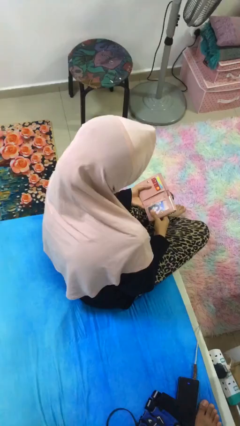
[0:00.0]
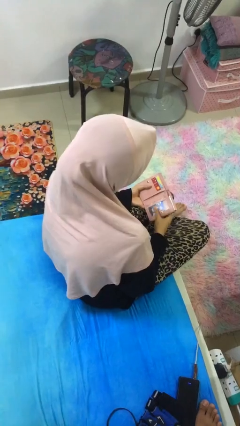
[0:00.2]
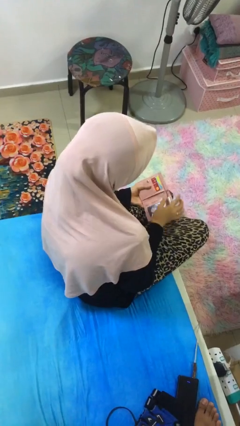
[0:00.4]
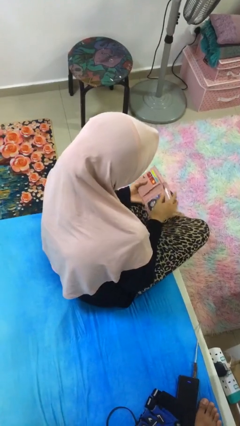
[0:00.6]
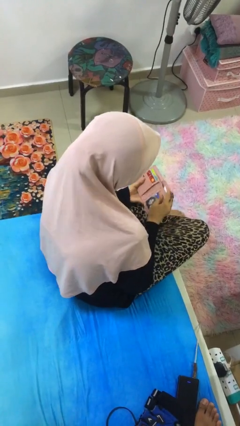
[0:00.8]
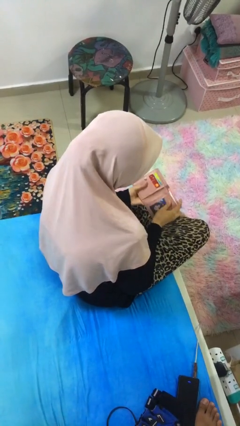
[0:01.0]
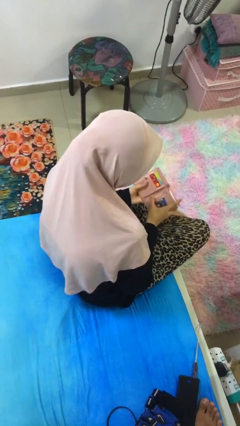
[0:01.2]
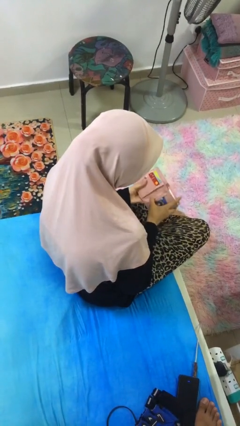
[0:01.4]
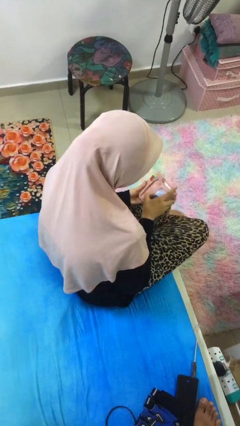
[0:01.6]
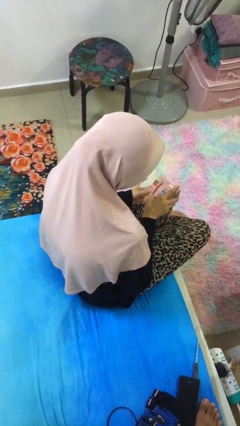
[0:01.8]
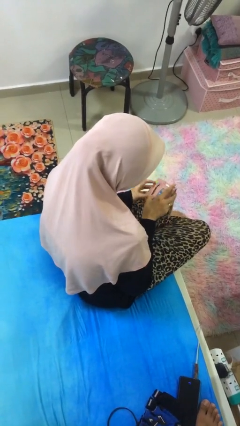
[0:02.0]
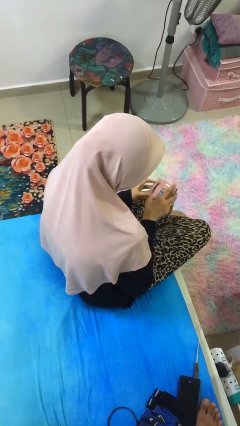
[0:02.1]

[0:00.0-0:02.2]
person searches in purse

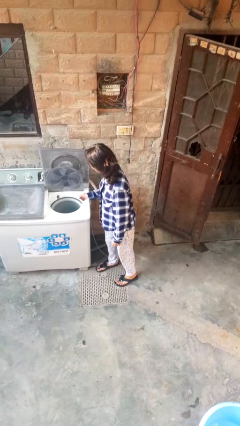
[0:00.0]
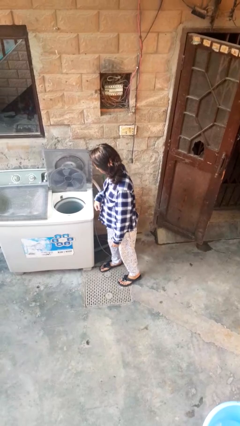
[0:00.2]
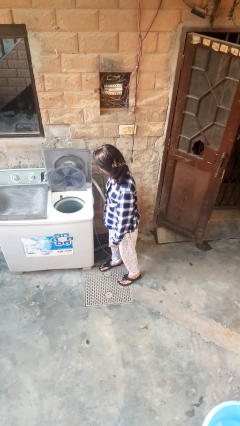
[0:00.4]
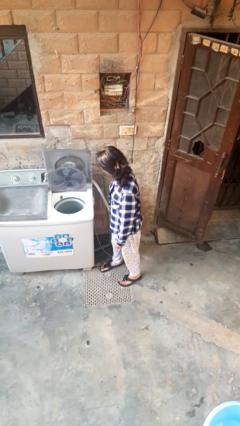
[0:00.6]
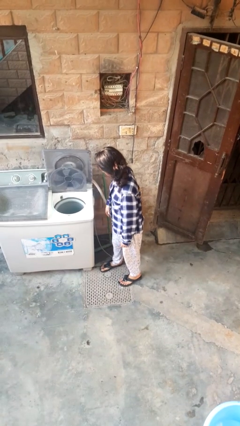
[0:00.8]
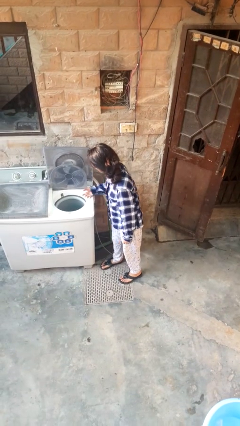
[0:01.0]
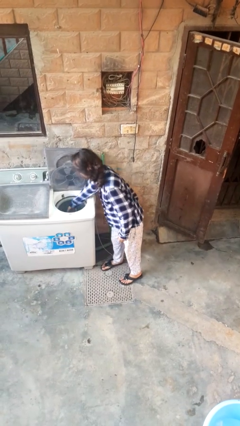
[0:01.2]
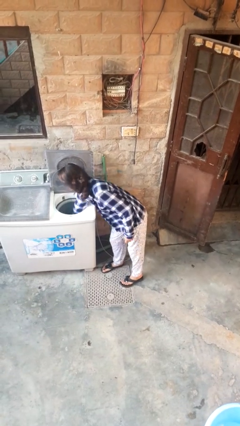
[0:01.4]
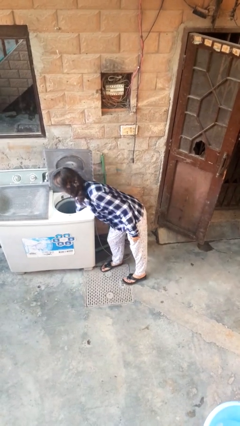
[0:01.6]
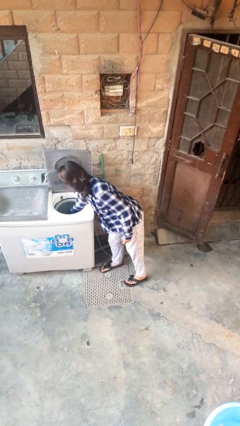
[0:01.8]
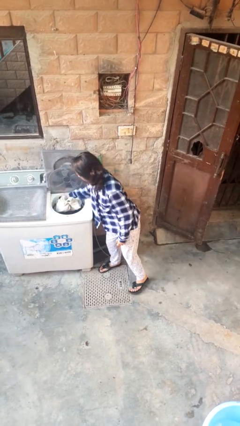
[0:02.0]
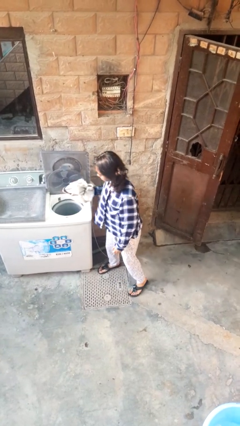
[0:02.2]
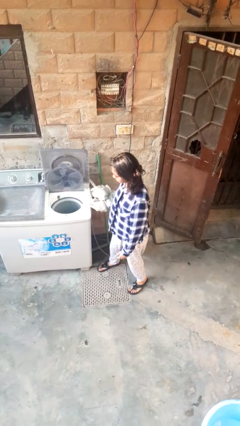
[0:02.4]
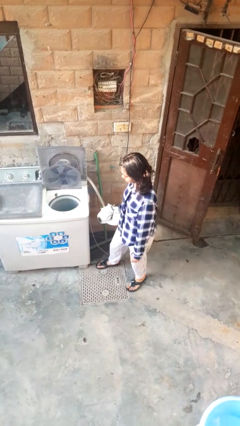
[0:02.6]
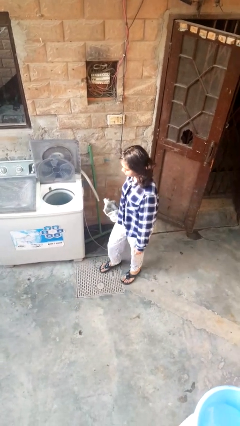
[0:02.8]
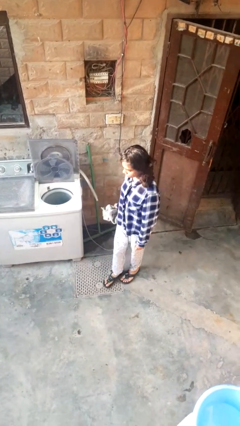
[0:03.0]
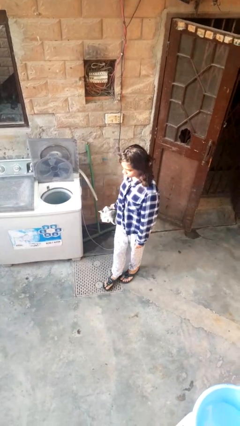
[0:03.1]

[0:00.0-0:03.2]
person unloads dryer

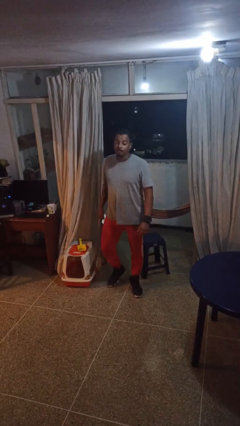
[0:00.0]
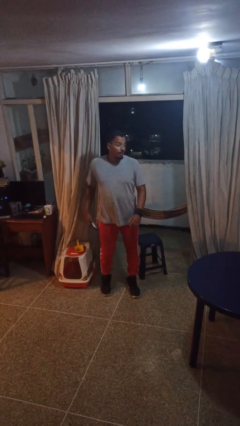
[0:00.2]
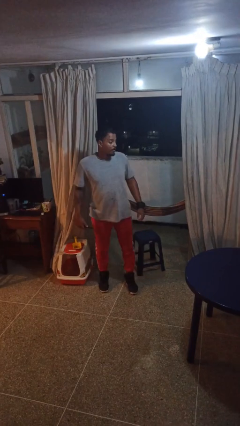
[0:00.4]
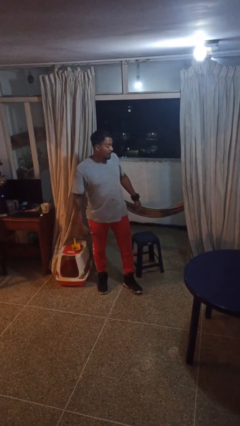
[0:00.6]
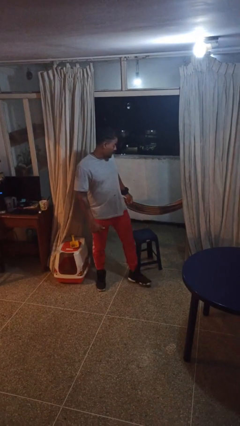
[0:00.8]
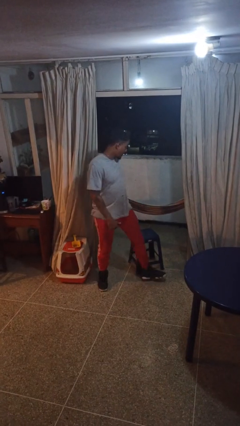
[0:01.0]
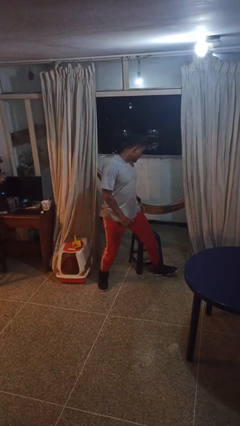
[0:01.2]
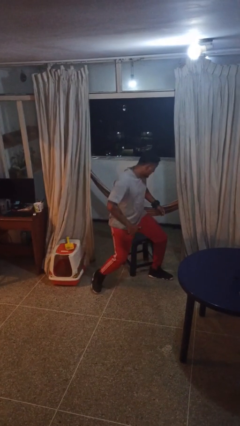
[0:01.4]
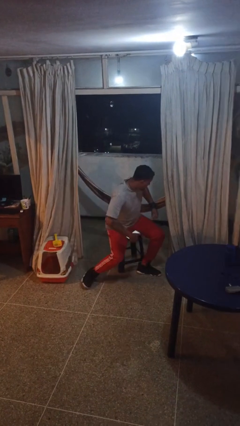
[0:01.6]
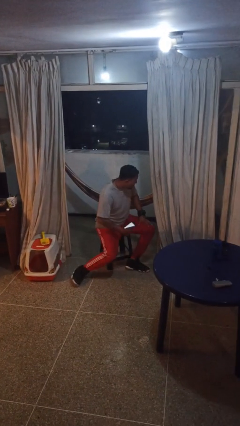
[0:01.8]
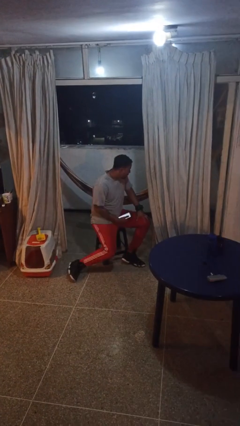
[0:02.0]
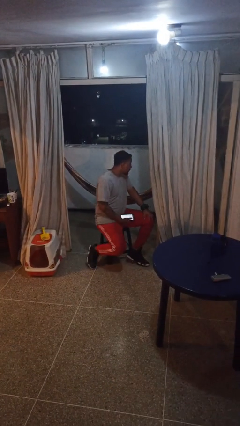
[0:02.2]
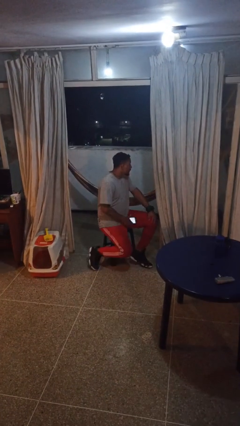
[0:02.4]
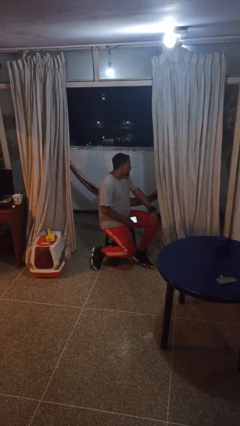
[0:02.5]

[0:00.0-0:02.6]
person sits down

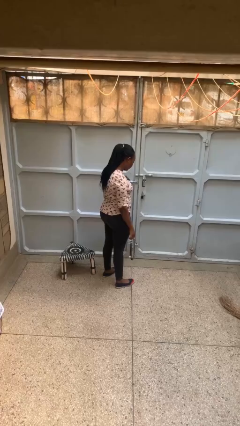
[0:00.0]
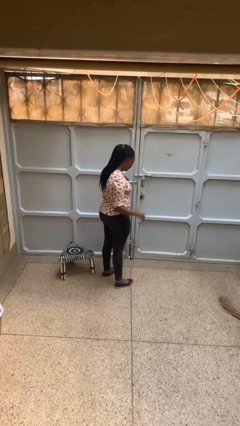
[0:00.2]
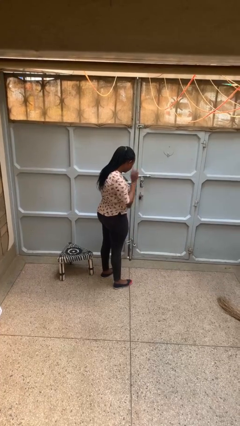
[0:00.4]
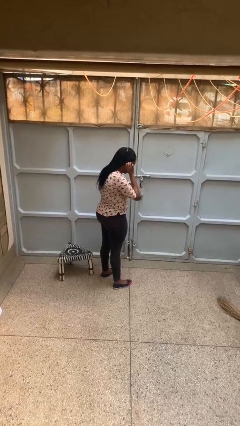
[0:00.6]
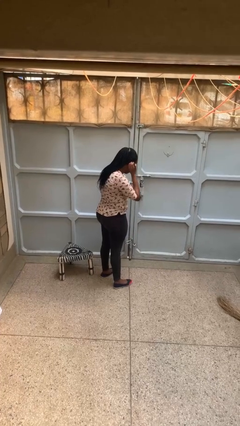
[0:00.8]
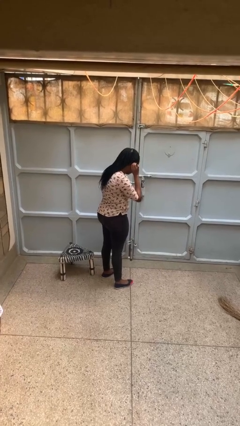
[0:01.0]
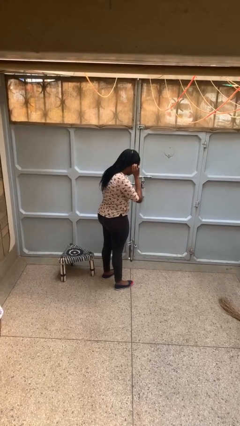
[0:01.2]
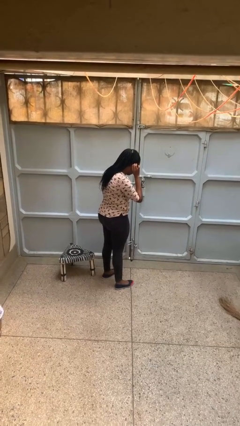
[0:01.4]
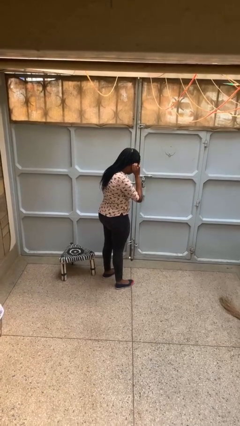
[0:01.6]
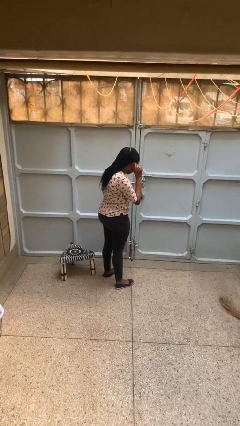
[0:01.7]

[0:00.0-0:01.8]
person gestures listen closely

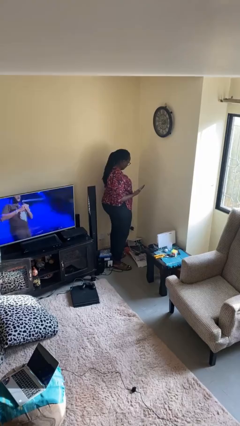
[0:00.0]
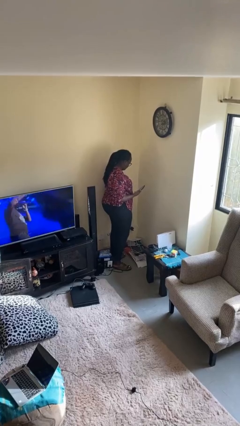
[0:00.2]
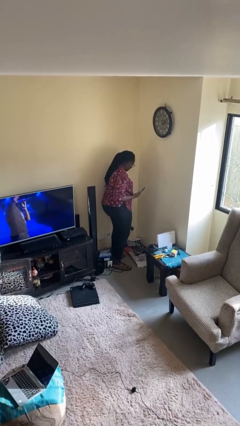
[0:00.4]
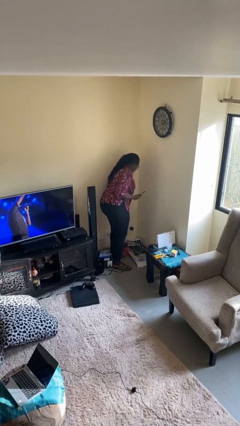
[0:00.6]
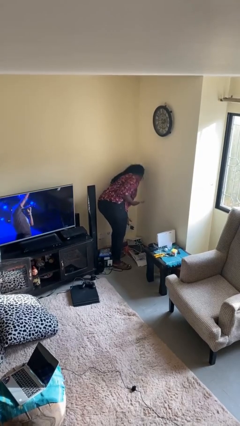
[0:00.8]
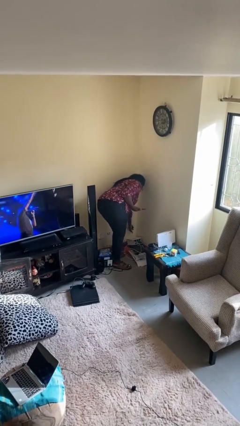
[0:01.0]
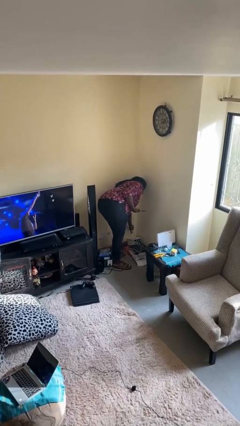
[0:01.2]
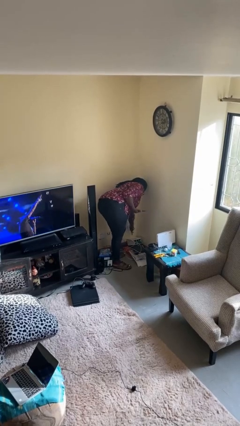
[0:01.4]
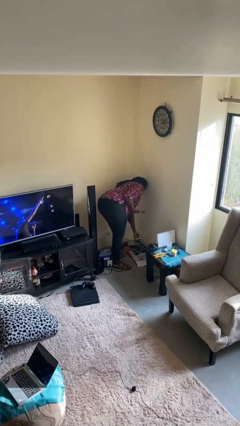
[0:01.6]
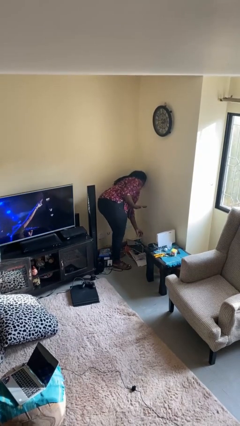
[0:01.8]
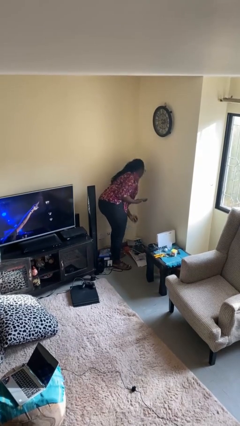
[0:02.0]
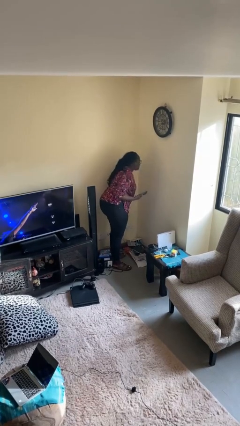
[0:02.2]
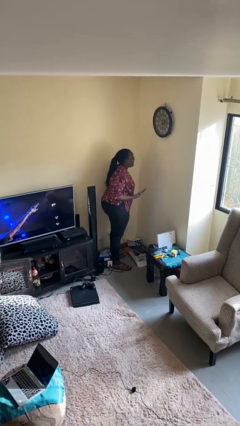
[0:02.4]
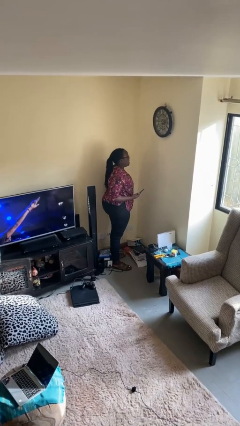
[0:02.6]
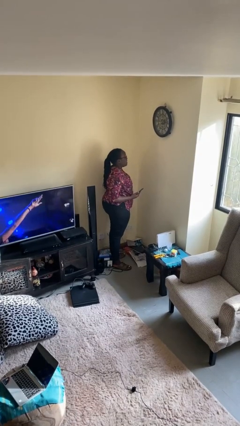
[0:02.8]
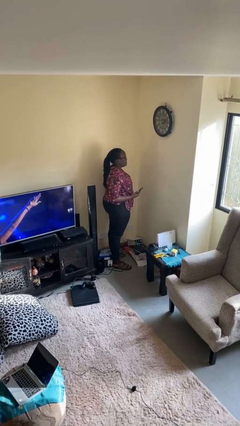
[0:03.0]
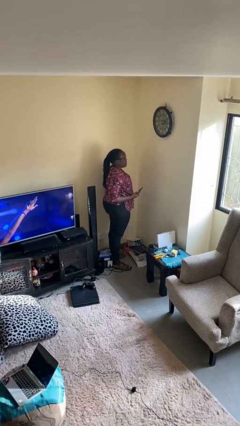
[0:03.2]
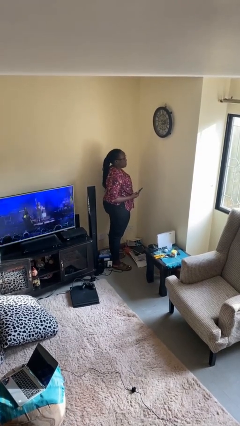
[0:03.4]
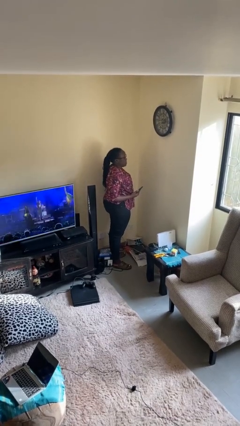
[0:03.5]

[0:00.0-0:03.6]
person unplugs from electrical socket

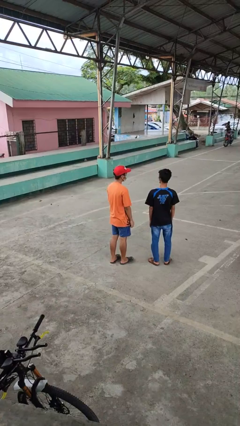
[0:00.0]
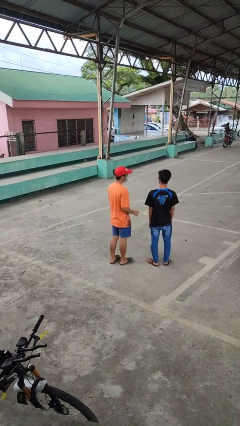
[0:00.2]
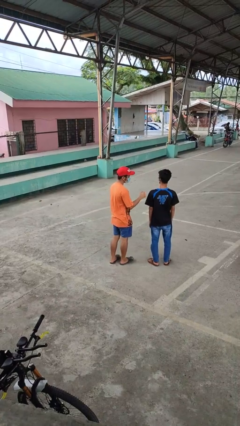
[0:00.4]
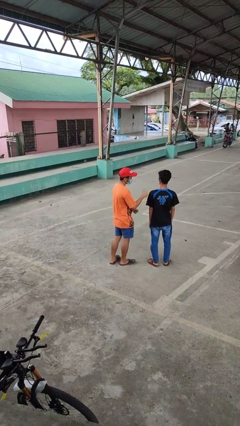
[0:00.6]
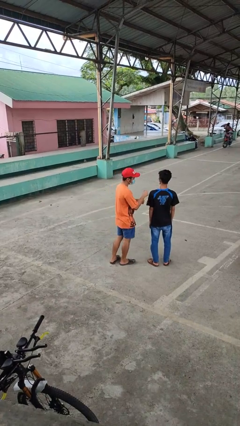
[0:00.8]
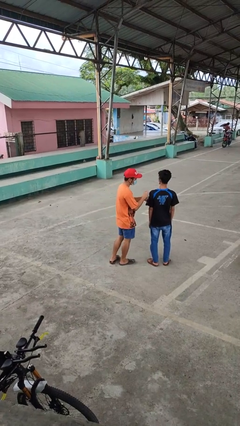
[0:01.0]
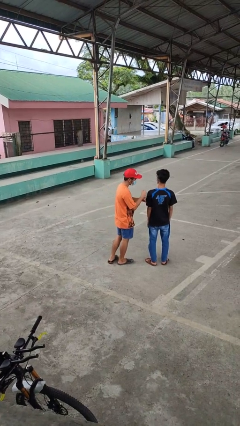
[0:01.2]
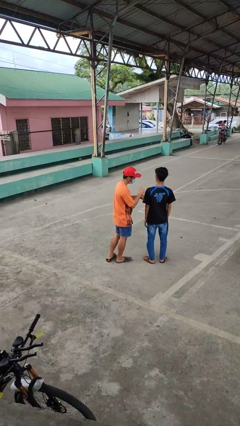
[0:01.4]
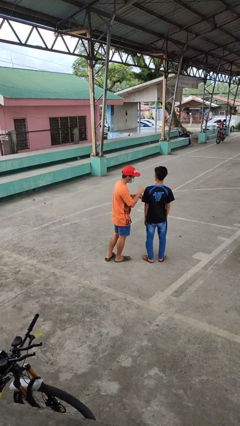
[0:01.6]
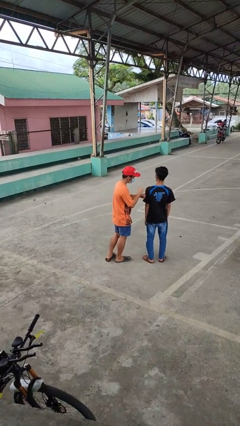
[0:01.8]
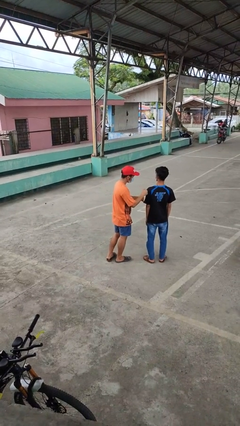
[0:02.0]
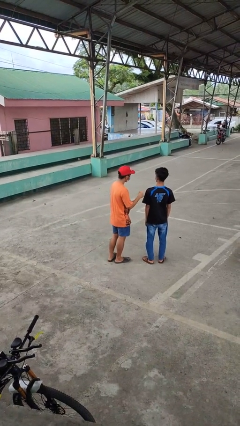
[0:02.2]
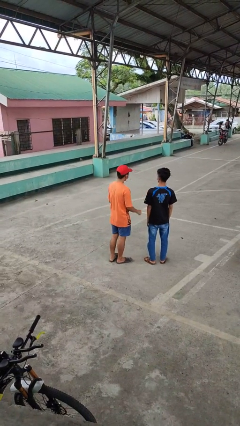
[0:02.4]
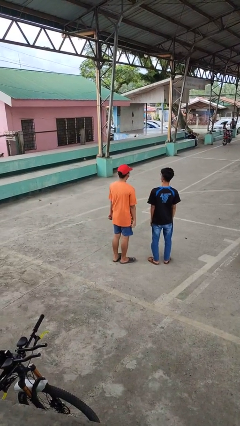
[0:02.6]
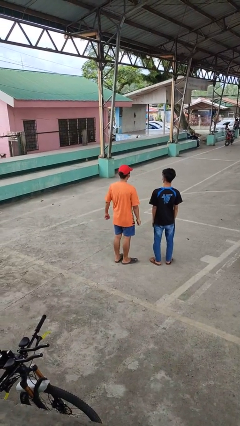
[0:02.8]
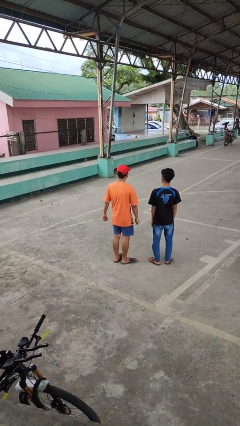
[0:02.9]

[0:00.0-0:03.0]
person pounds shoulders of person

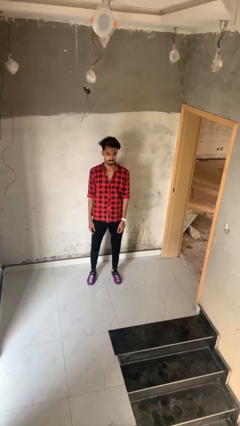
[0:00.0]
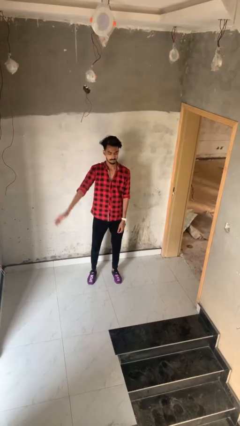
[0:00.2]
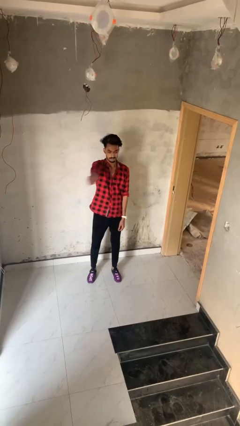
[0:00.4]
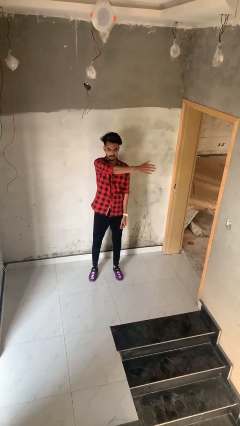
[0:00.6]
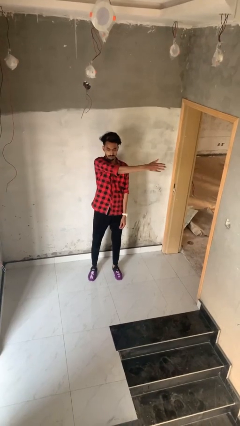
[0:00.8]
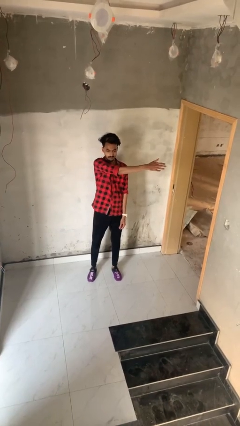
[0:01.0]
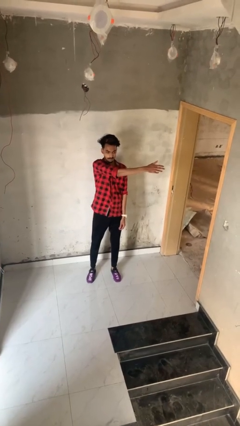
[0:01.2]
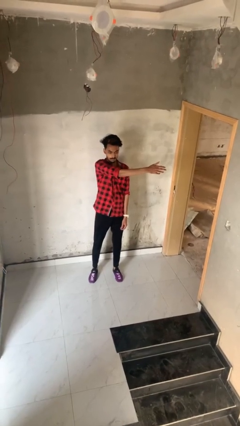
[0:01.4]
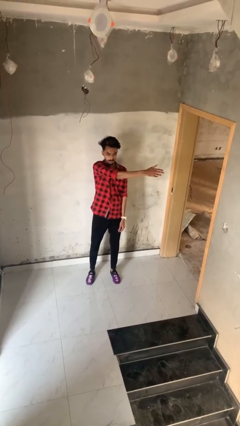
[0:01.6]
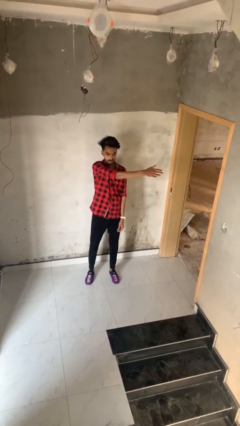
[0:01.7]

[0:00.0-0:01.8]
person gestures swipe left
